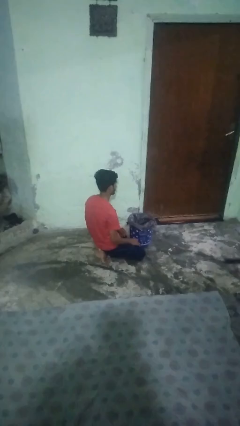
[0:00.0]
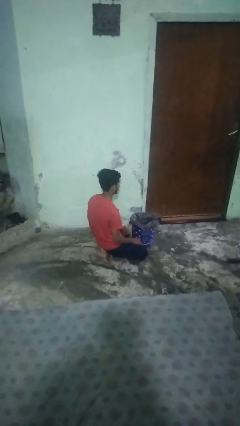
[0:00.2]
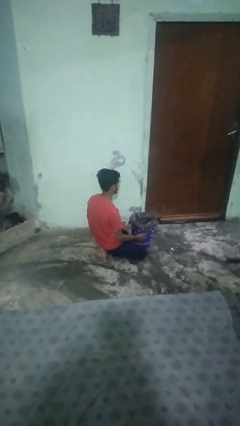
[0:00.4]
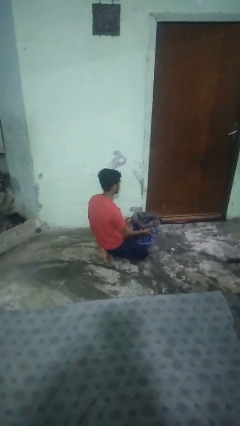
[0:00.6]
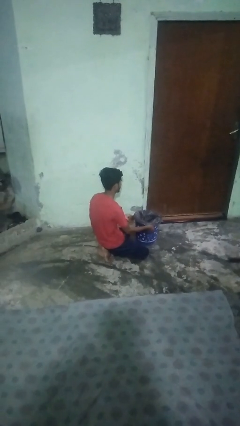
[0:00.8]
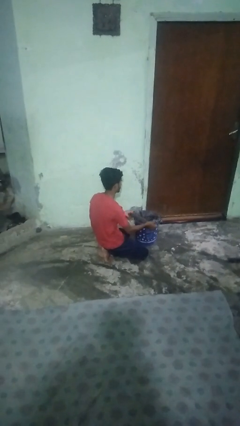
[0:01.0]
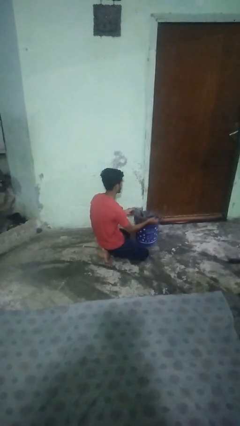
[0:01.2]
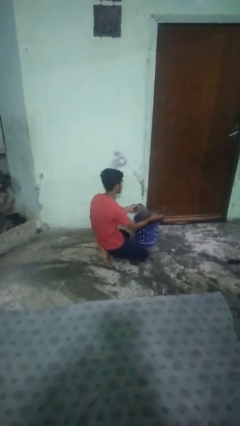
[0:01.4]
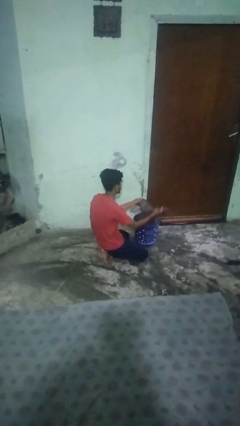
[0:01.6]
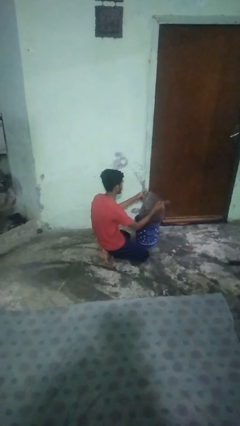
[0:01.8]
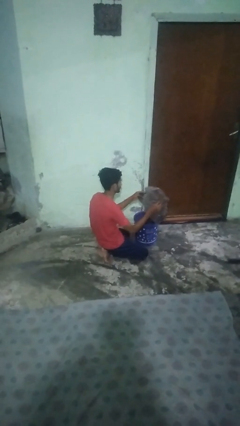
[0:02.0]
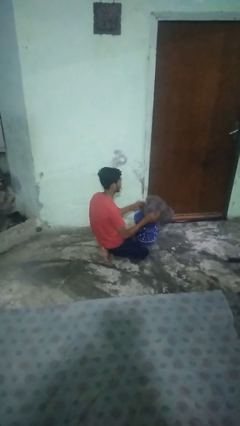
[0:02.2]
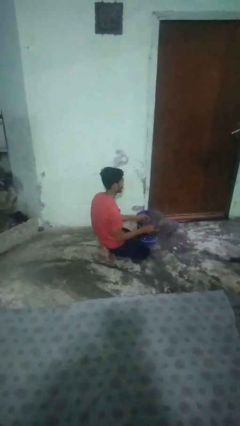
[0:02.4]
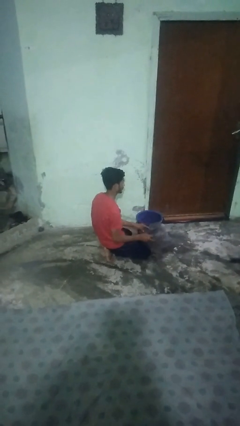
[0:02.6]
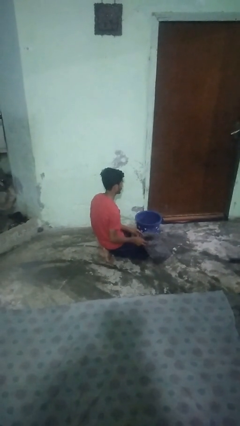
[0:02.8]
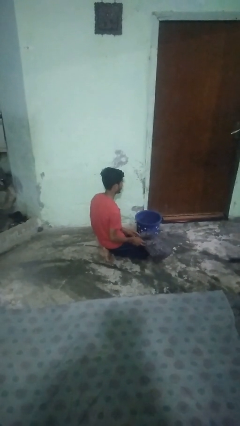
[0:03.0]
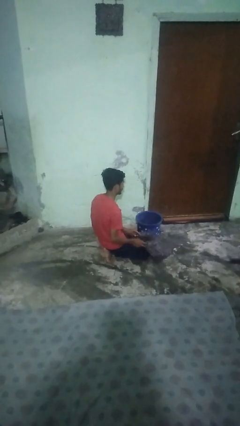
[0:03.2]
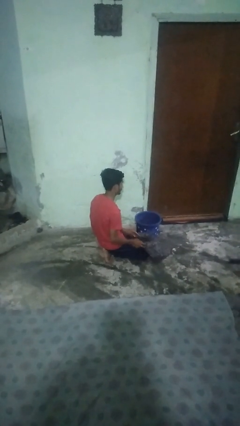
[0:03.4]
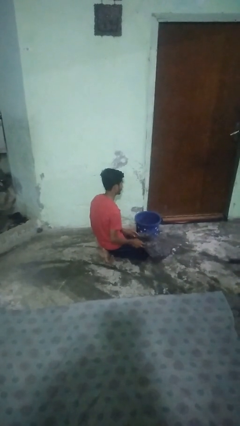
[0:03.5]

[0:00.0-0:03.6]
person removes trashbag from trashcan

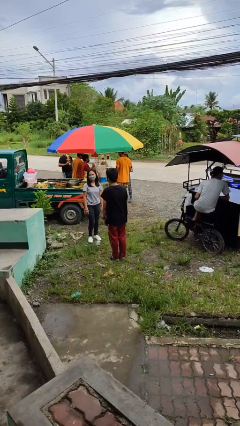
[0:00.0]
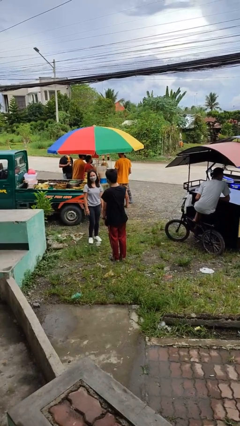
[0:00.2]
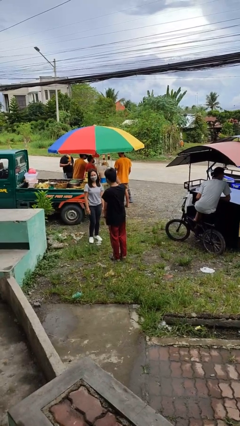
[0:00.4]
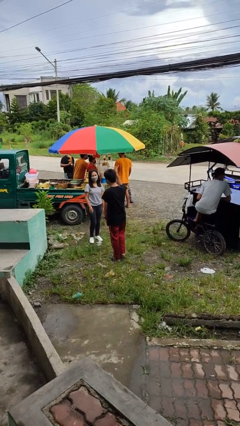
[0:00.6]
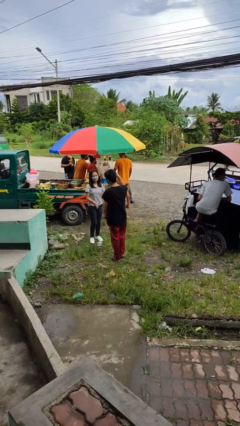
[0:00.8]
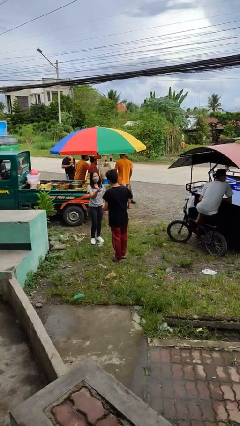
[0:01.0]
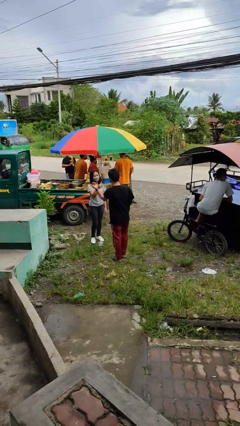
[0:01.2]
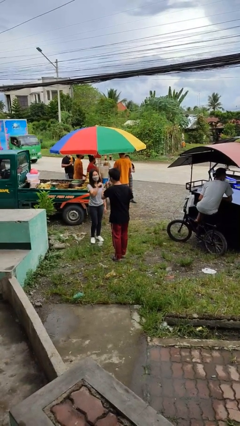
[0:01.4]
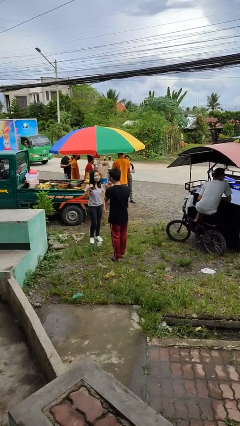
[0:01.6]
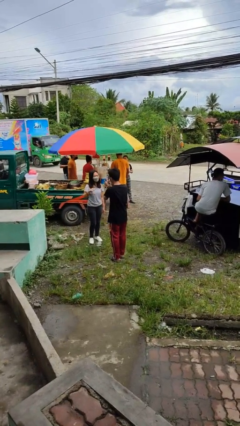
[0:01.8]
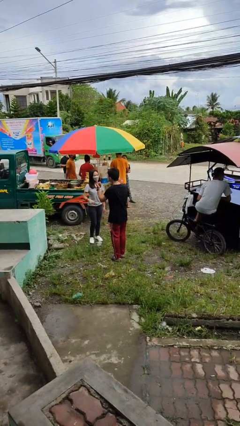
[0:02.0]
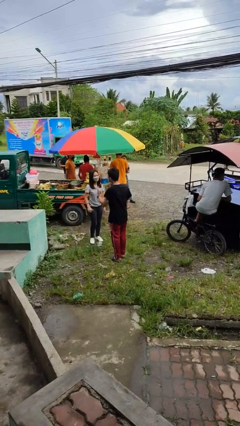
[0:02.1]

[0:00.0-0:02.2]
person talks to person

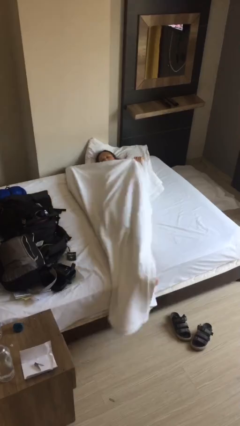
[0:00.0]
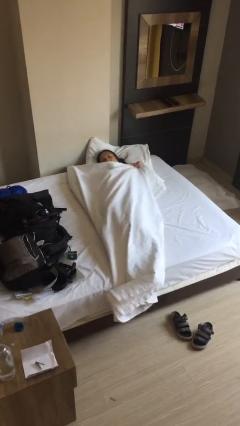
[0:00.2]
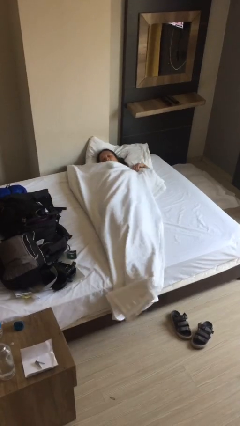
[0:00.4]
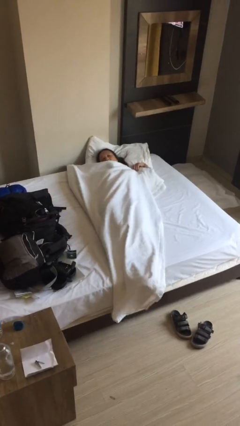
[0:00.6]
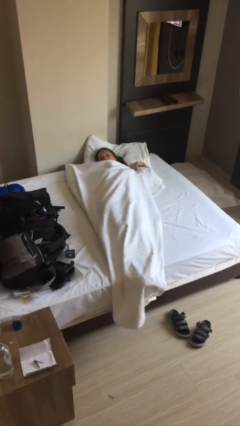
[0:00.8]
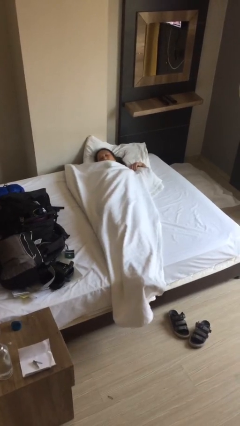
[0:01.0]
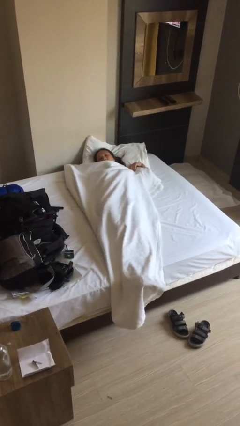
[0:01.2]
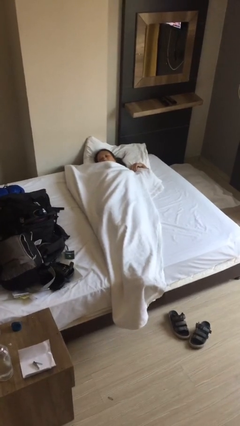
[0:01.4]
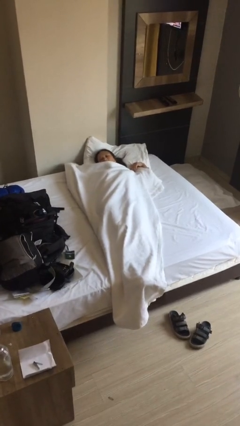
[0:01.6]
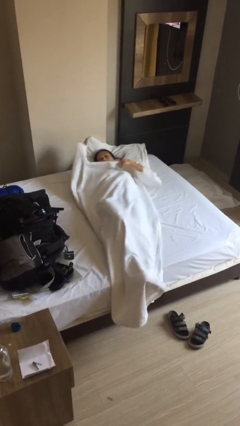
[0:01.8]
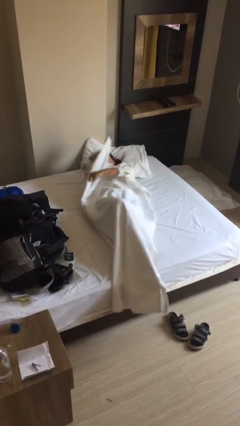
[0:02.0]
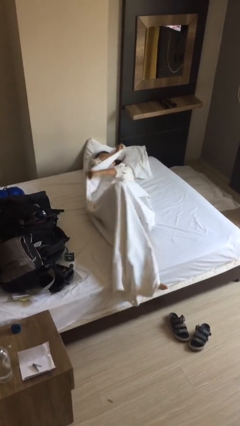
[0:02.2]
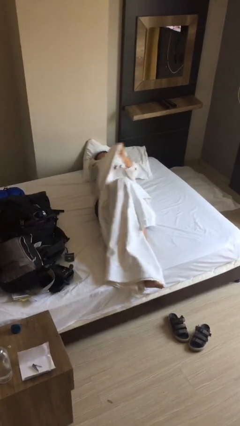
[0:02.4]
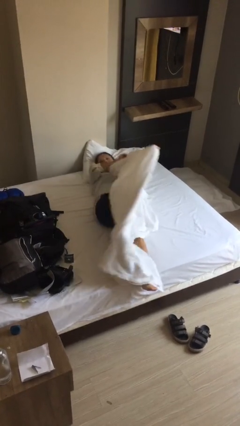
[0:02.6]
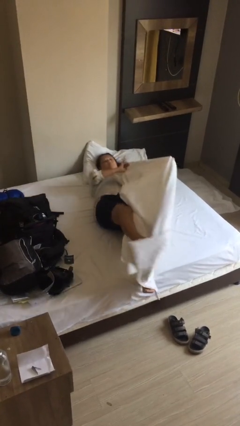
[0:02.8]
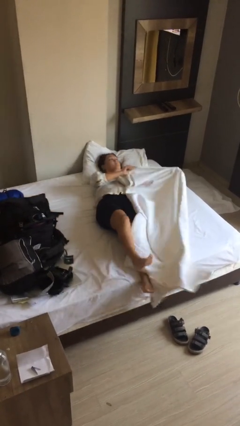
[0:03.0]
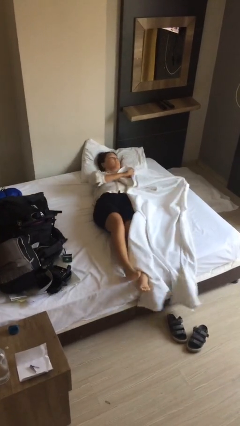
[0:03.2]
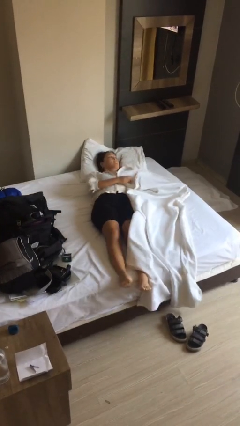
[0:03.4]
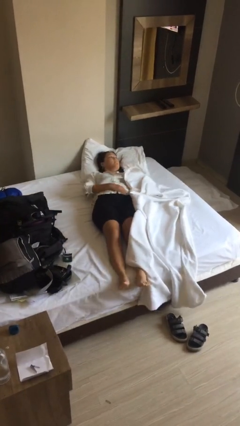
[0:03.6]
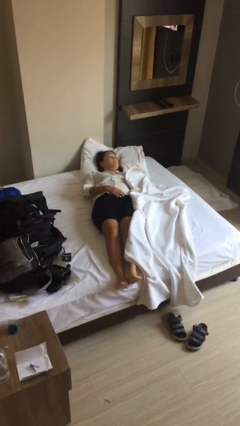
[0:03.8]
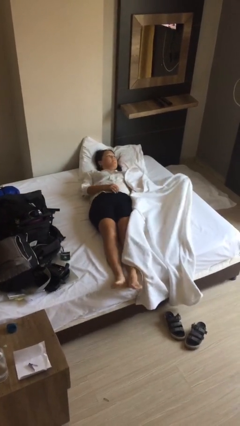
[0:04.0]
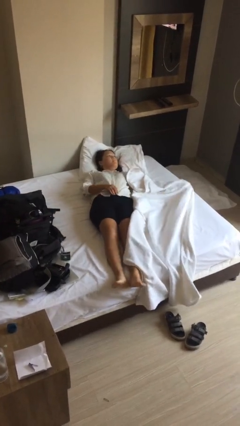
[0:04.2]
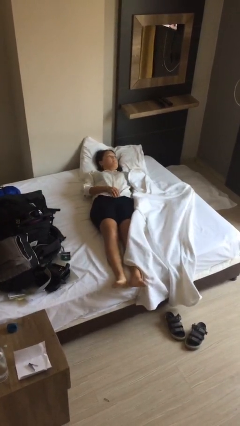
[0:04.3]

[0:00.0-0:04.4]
person uncovers with bedsheets

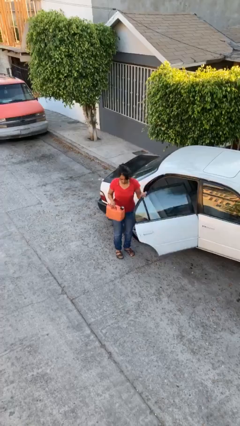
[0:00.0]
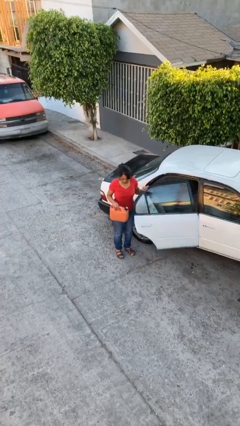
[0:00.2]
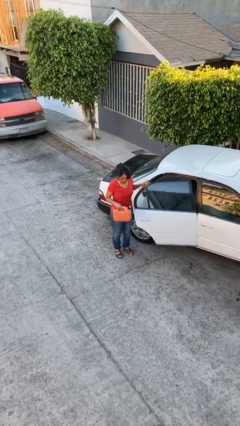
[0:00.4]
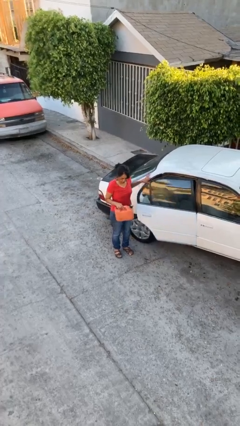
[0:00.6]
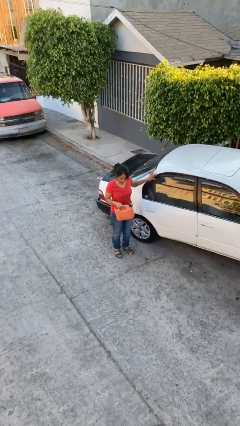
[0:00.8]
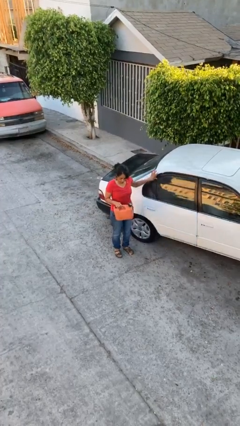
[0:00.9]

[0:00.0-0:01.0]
person closes car door

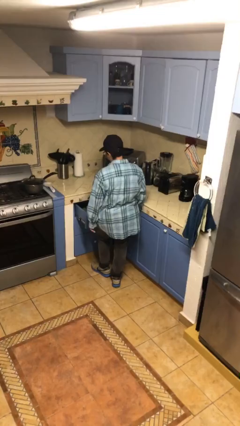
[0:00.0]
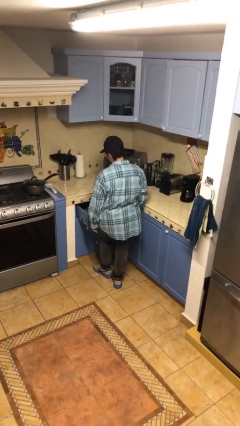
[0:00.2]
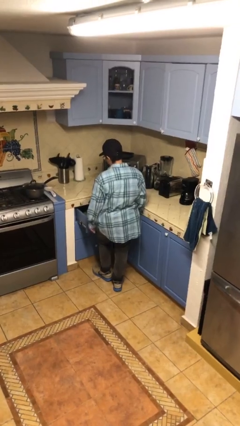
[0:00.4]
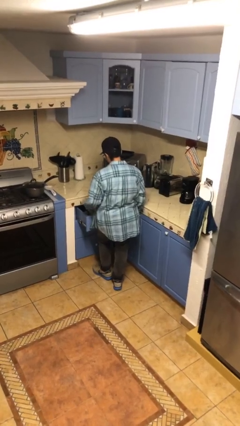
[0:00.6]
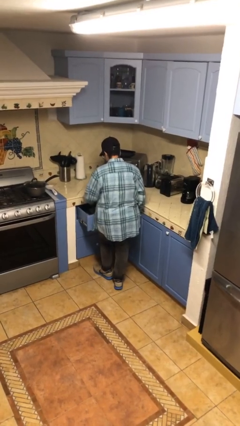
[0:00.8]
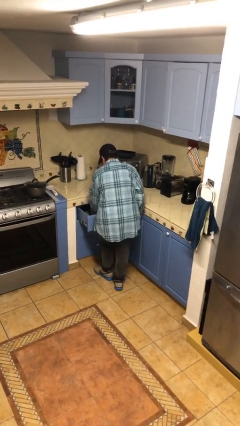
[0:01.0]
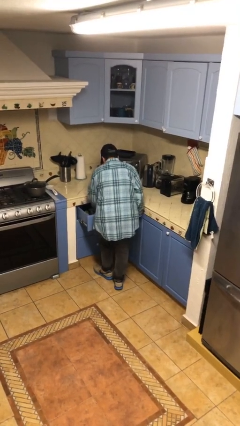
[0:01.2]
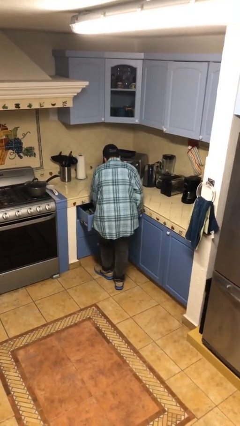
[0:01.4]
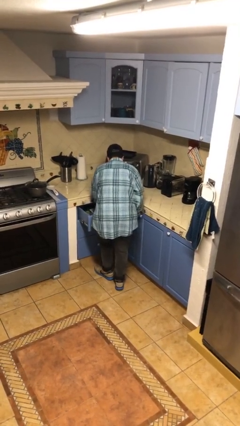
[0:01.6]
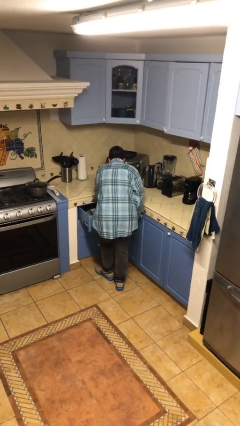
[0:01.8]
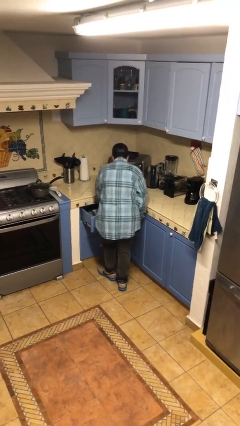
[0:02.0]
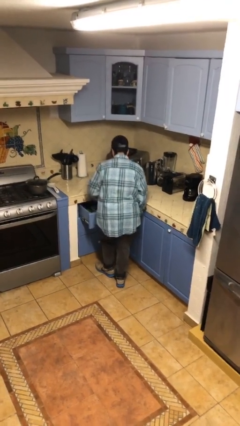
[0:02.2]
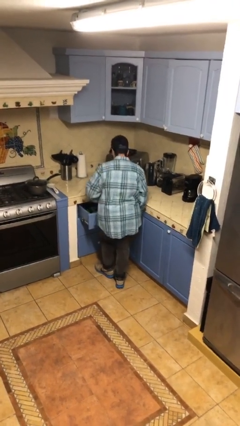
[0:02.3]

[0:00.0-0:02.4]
person searches in kitchen drawer

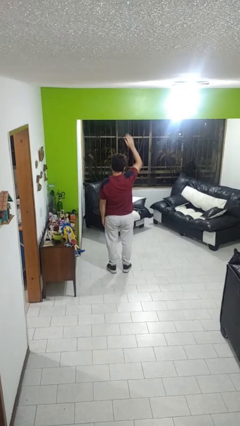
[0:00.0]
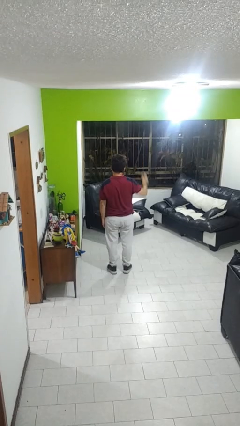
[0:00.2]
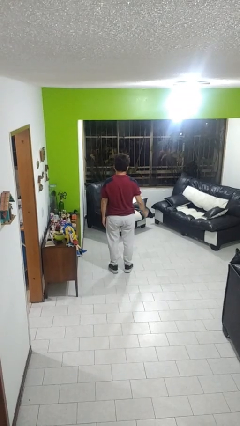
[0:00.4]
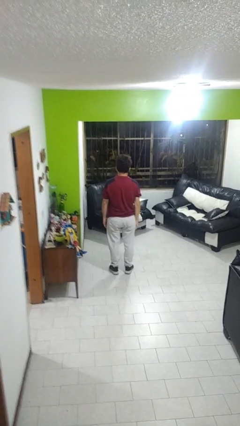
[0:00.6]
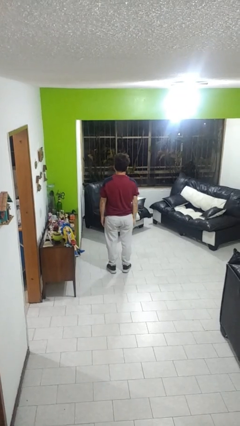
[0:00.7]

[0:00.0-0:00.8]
person gestures lower hand

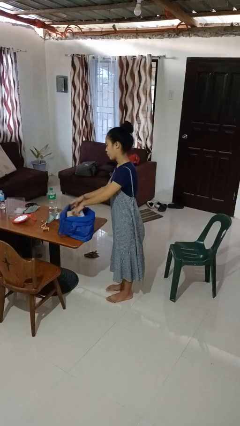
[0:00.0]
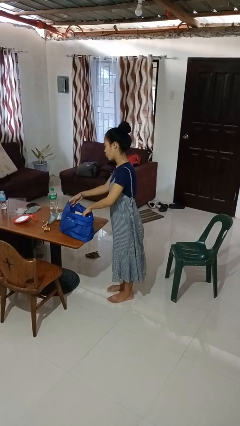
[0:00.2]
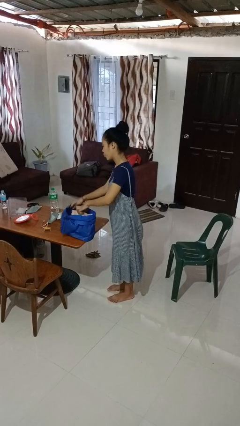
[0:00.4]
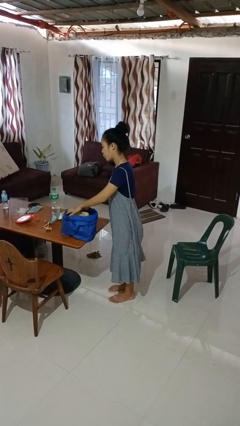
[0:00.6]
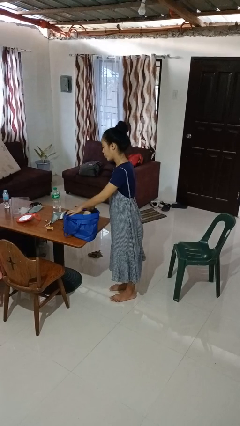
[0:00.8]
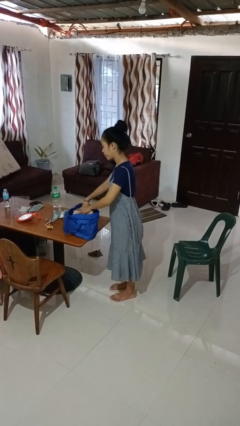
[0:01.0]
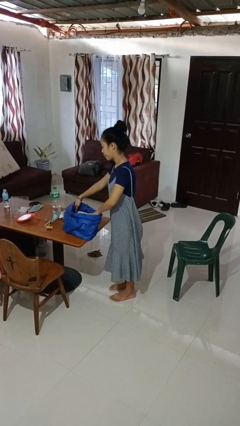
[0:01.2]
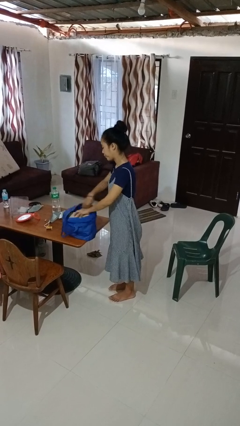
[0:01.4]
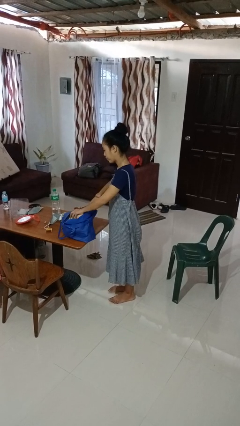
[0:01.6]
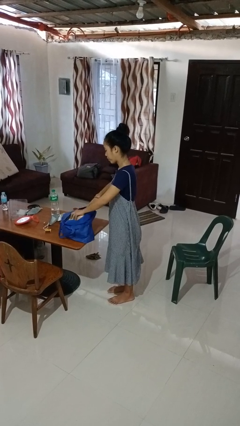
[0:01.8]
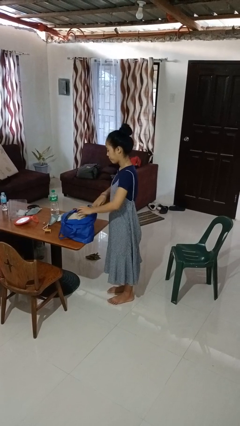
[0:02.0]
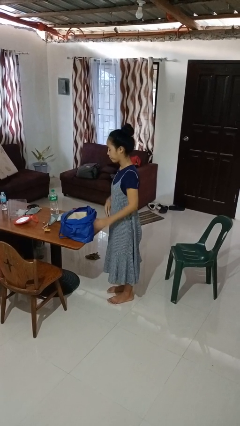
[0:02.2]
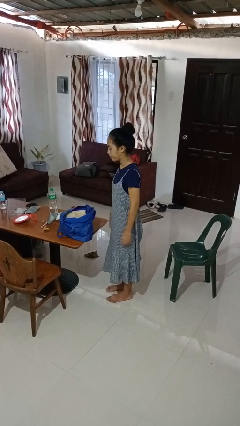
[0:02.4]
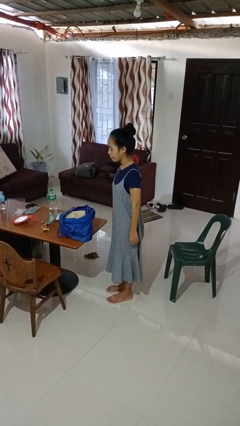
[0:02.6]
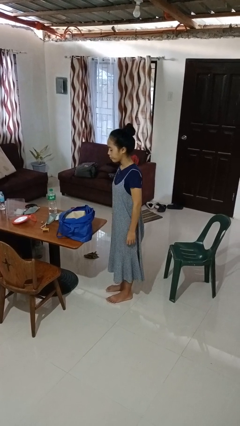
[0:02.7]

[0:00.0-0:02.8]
person searches in bag
